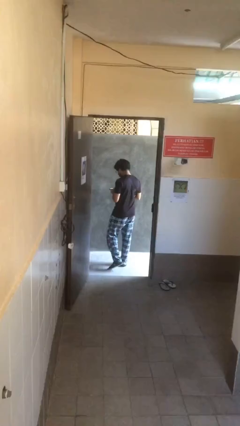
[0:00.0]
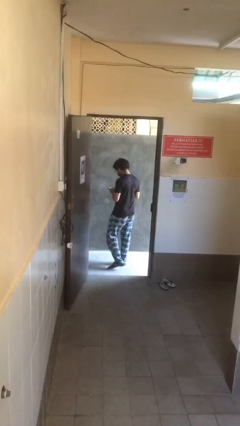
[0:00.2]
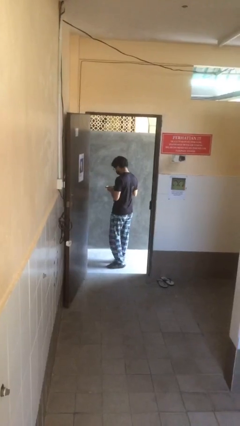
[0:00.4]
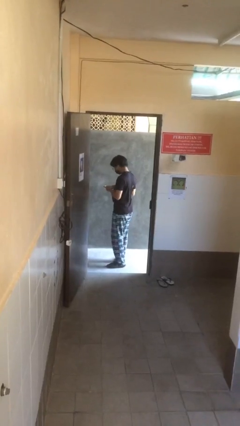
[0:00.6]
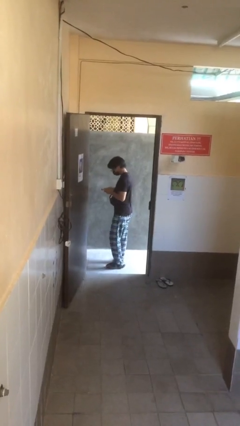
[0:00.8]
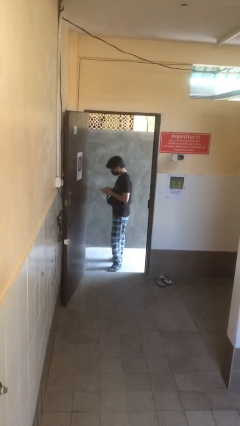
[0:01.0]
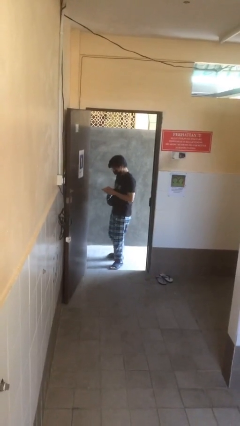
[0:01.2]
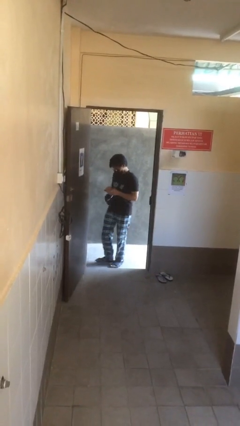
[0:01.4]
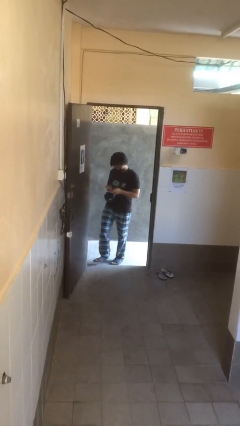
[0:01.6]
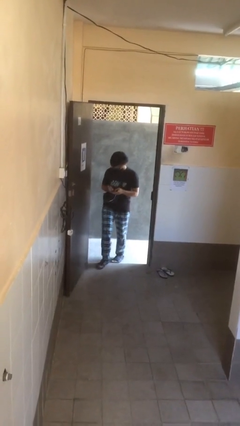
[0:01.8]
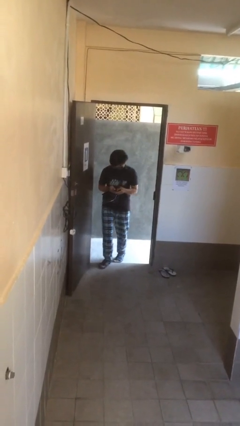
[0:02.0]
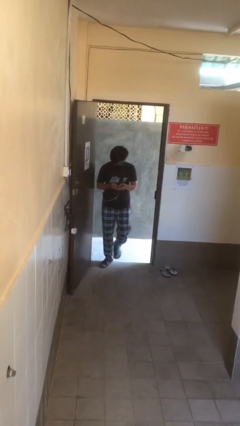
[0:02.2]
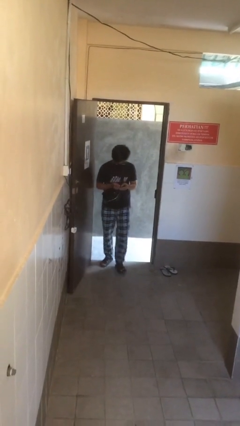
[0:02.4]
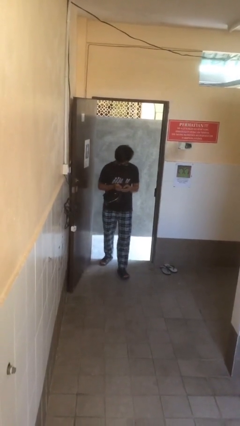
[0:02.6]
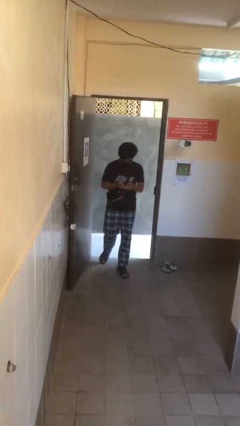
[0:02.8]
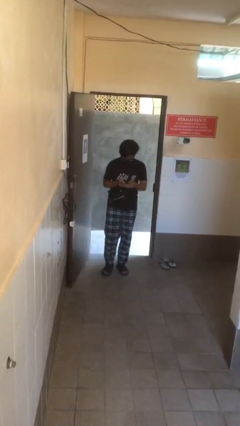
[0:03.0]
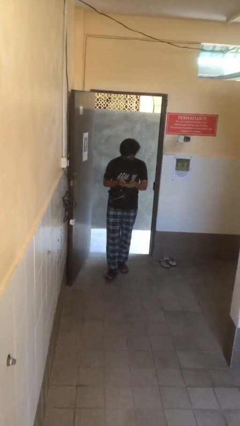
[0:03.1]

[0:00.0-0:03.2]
person enters scene through structure

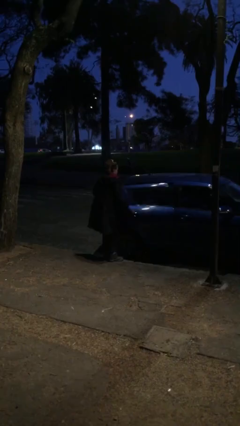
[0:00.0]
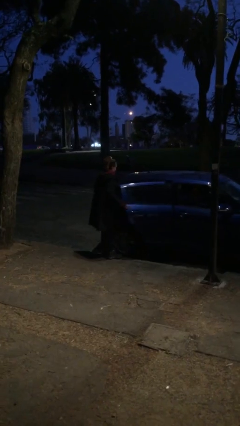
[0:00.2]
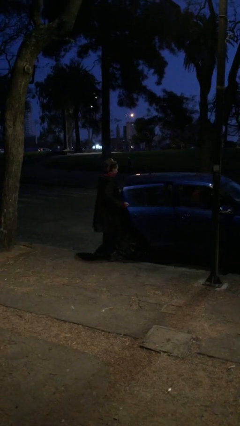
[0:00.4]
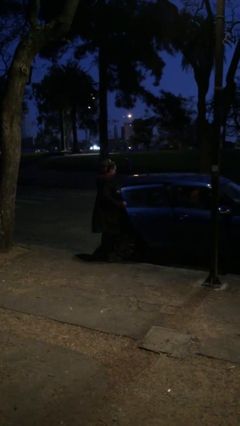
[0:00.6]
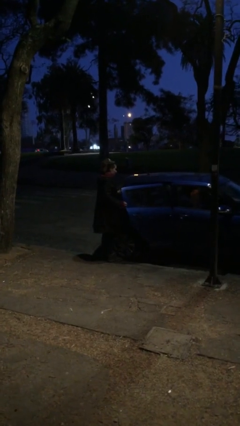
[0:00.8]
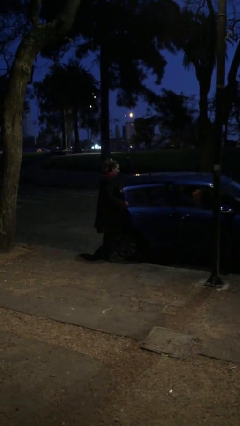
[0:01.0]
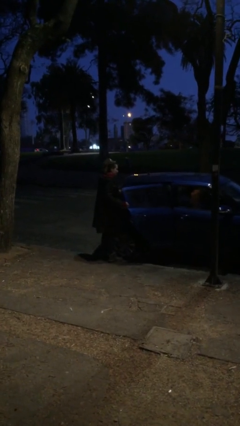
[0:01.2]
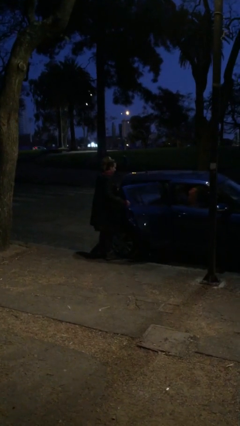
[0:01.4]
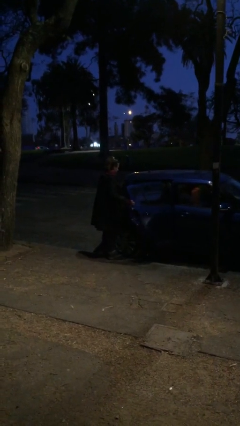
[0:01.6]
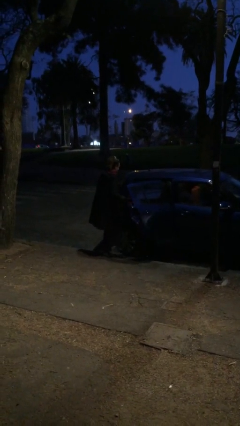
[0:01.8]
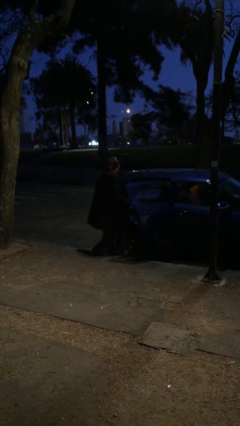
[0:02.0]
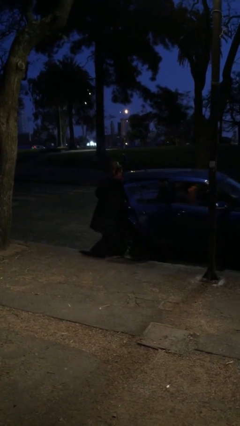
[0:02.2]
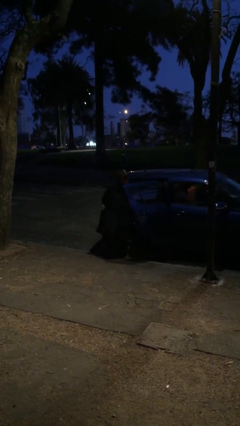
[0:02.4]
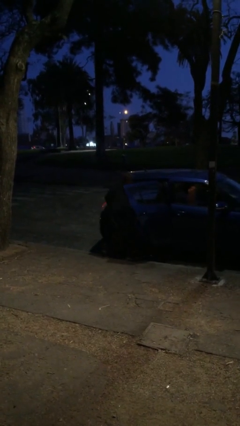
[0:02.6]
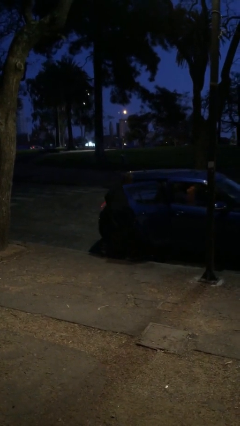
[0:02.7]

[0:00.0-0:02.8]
person opens car door

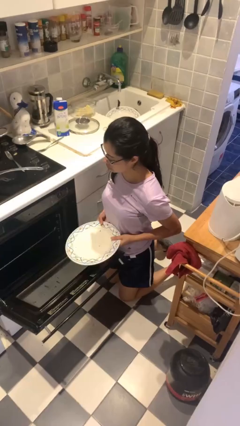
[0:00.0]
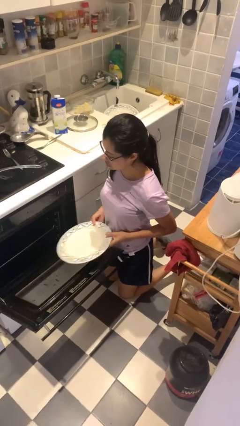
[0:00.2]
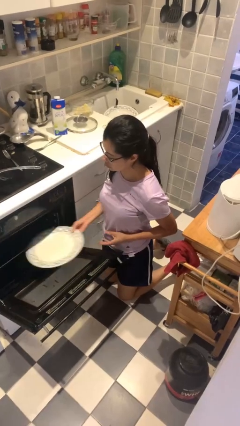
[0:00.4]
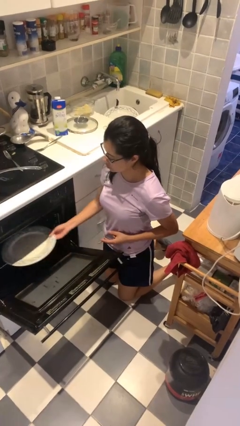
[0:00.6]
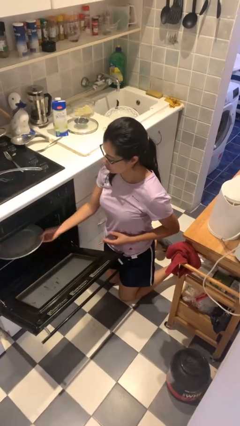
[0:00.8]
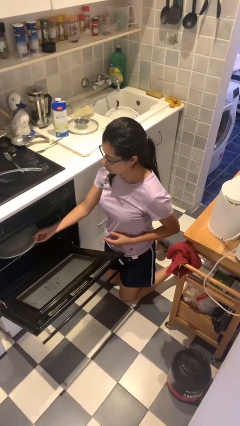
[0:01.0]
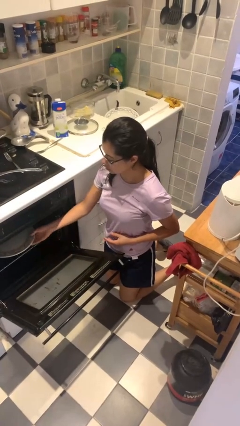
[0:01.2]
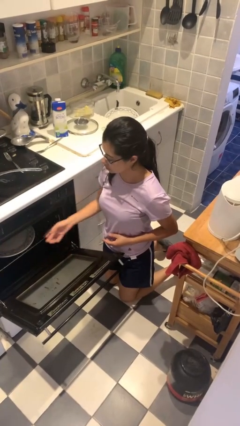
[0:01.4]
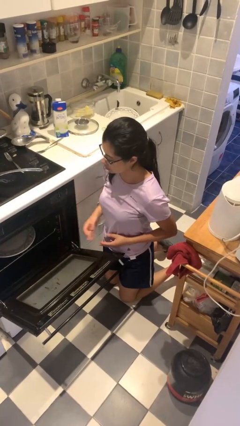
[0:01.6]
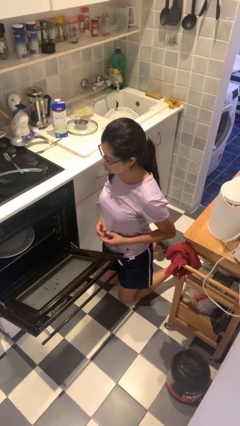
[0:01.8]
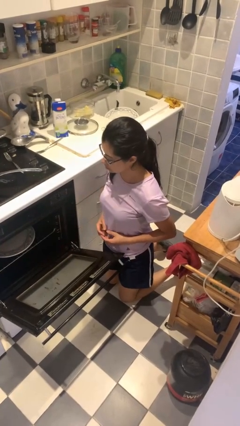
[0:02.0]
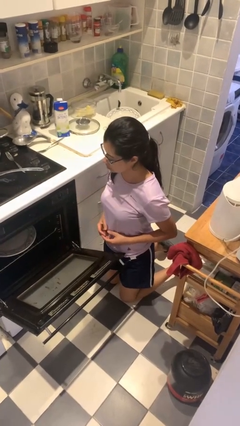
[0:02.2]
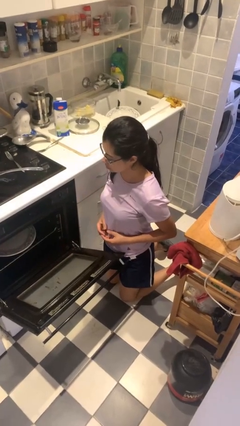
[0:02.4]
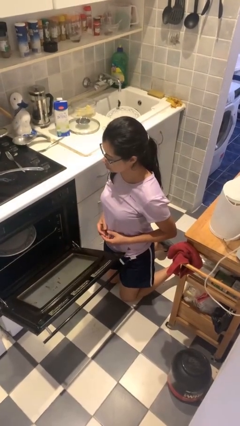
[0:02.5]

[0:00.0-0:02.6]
person loads dishwasher

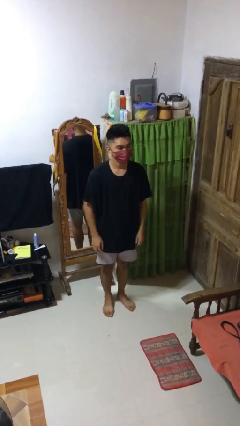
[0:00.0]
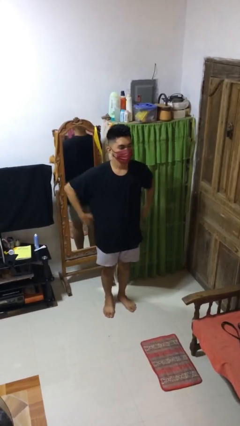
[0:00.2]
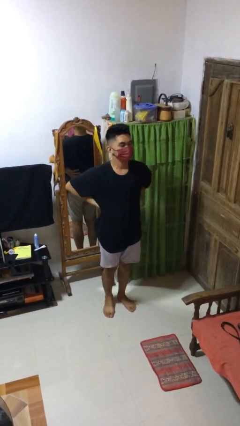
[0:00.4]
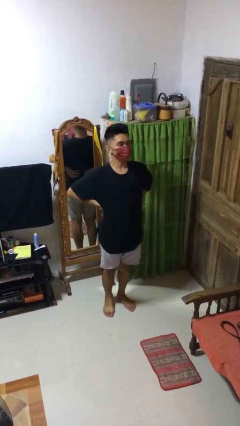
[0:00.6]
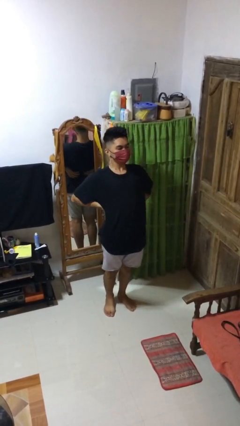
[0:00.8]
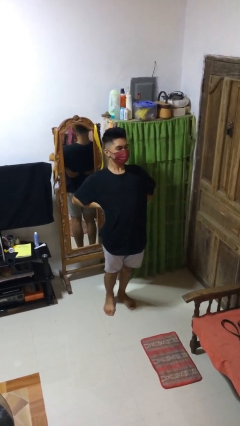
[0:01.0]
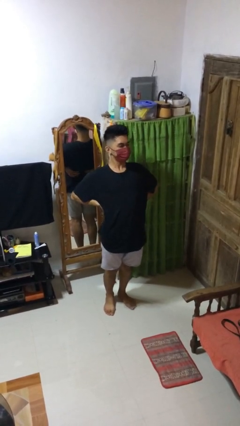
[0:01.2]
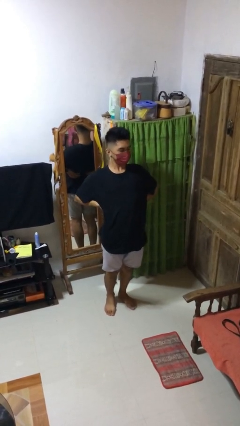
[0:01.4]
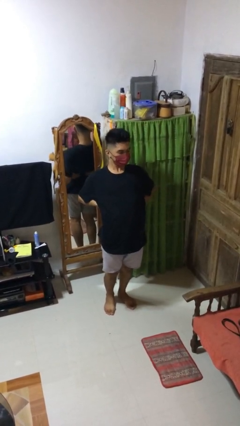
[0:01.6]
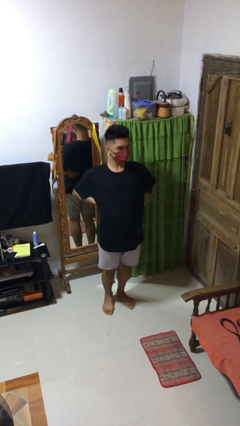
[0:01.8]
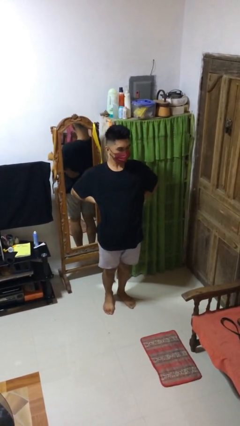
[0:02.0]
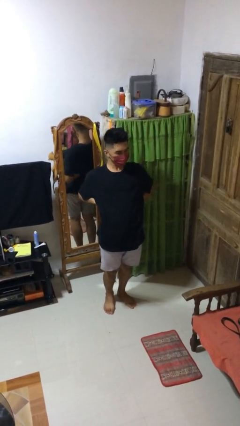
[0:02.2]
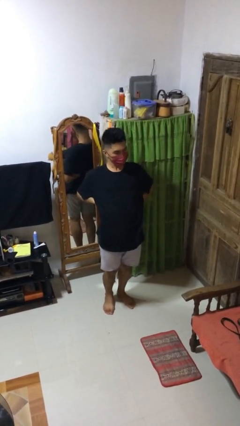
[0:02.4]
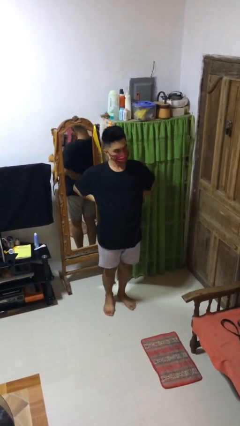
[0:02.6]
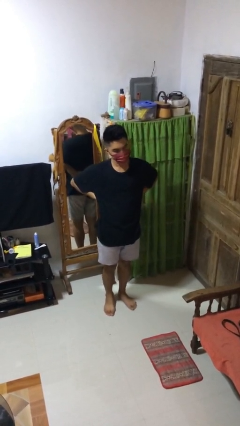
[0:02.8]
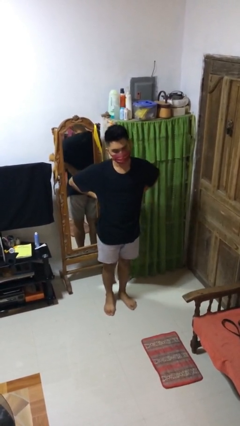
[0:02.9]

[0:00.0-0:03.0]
person stretches back

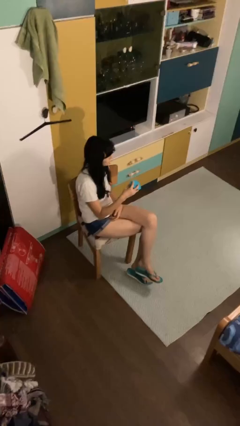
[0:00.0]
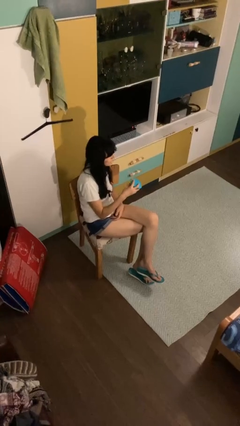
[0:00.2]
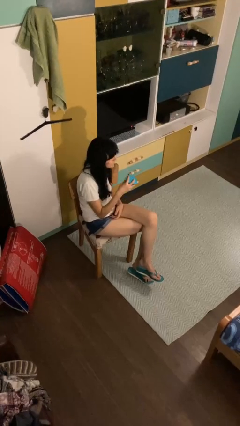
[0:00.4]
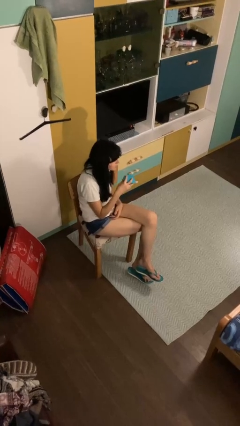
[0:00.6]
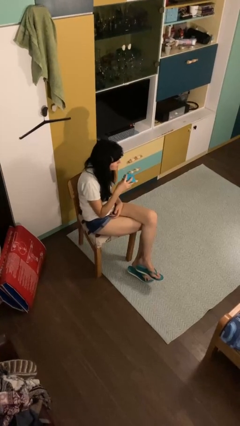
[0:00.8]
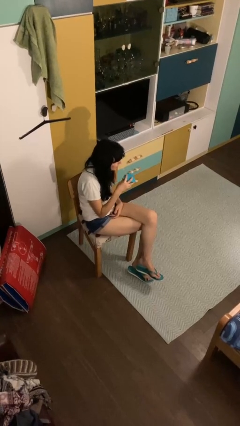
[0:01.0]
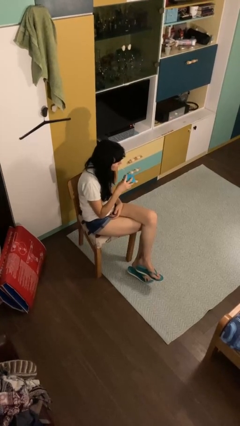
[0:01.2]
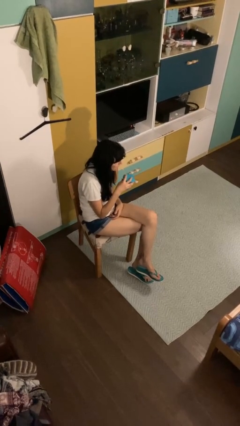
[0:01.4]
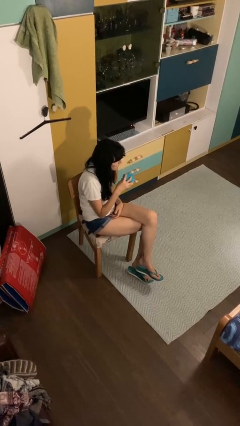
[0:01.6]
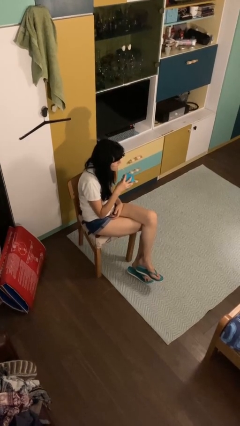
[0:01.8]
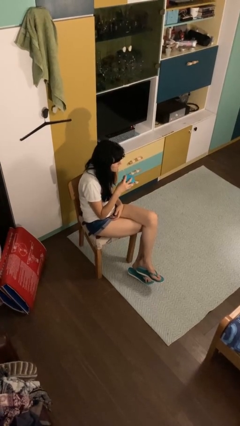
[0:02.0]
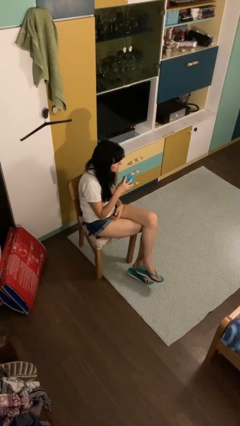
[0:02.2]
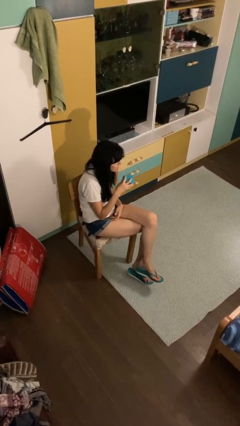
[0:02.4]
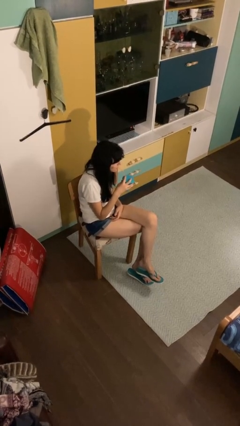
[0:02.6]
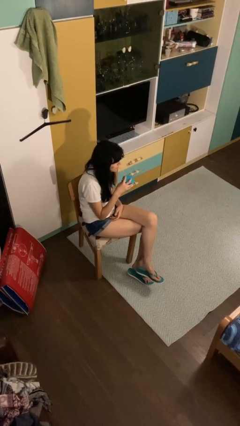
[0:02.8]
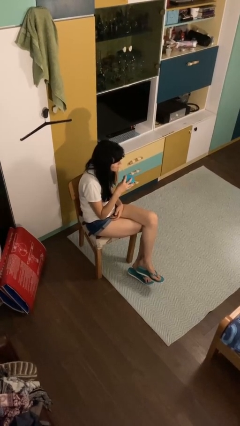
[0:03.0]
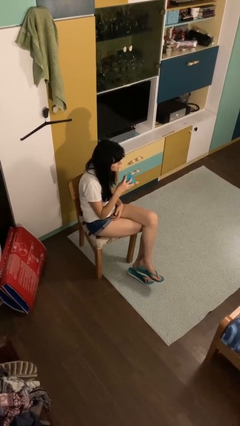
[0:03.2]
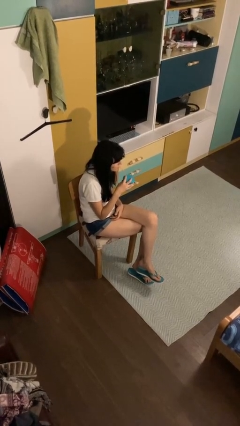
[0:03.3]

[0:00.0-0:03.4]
person drinks from straw

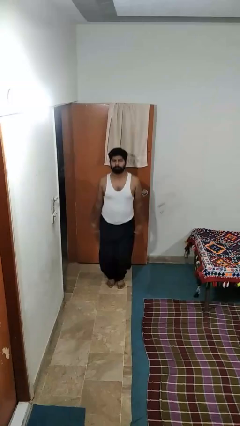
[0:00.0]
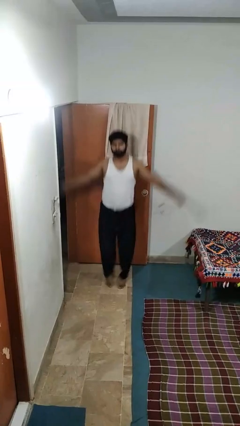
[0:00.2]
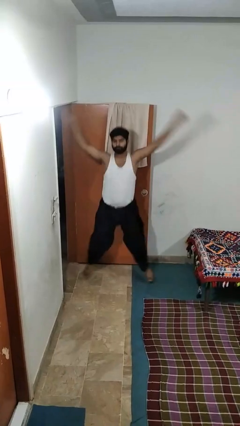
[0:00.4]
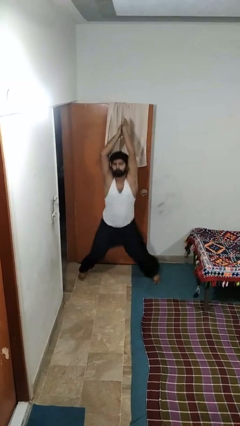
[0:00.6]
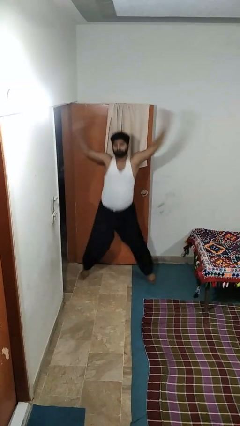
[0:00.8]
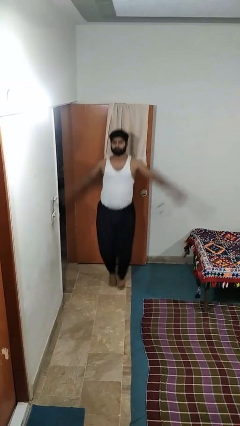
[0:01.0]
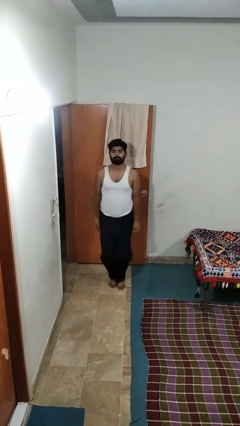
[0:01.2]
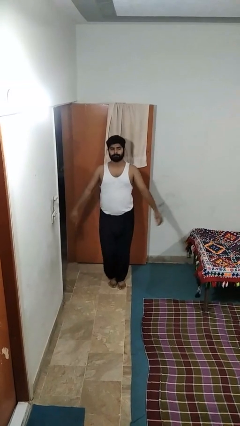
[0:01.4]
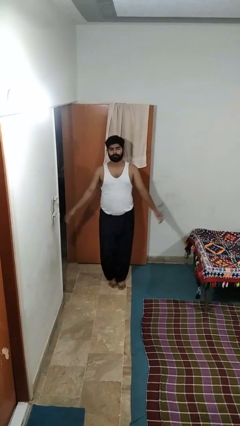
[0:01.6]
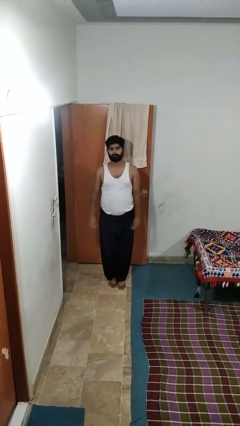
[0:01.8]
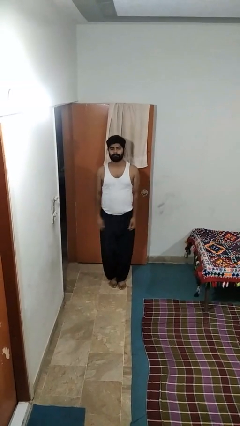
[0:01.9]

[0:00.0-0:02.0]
person exercises with jumping jacks
